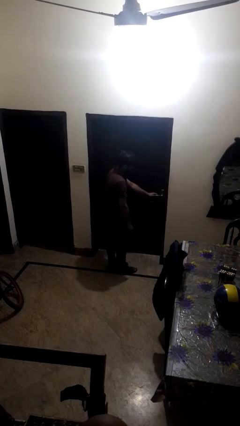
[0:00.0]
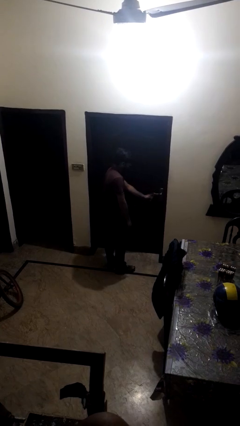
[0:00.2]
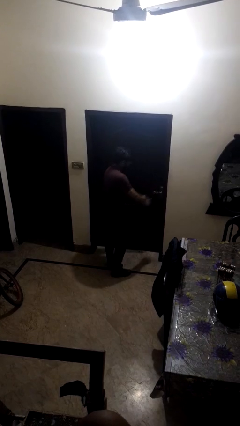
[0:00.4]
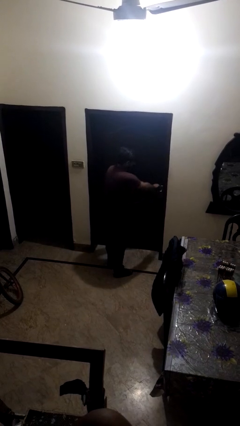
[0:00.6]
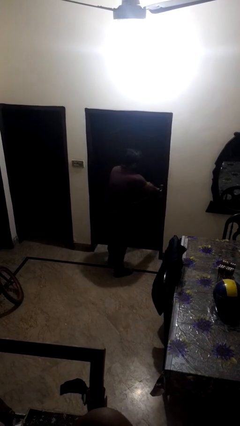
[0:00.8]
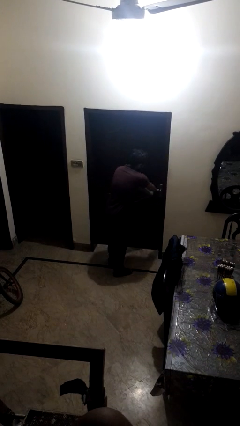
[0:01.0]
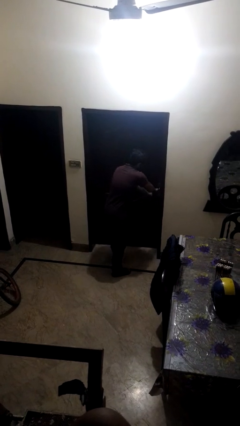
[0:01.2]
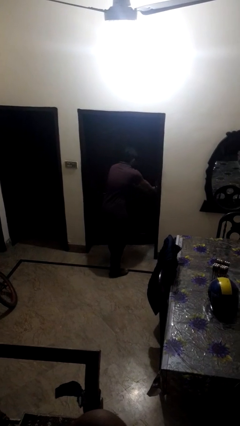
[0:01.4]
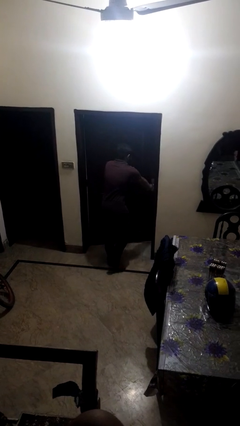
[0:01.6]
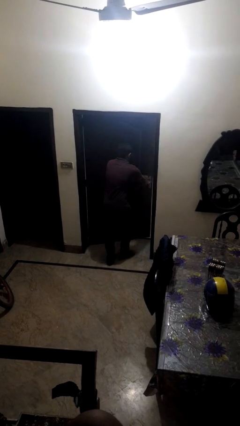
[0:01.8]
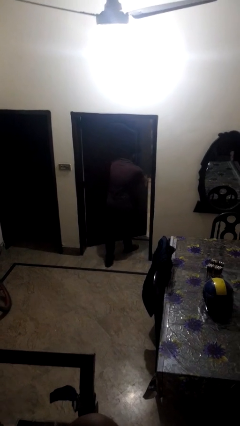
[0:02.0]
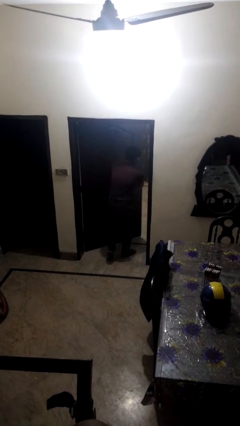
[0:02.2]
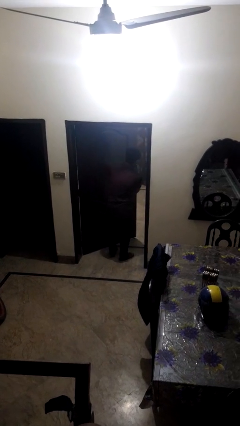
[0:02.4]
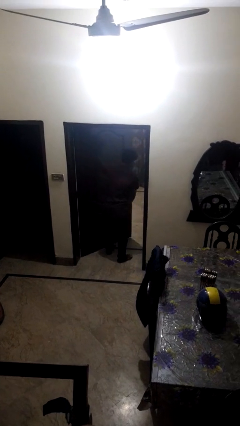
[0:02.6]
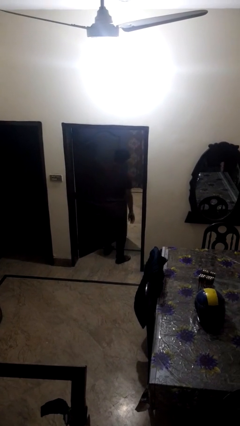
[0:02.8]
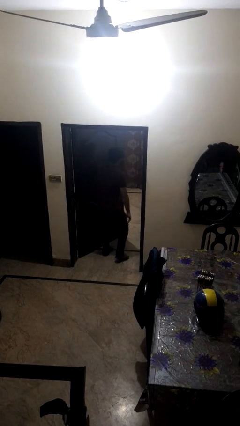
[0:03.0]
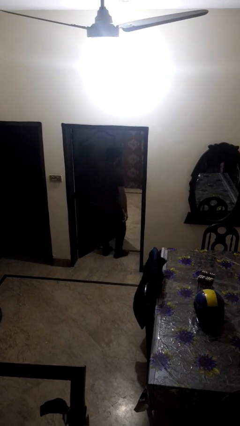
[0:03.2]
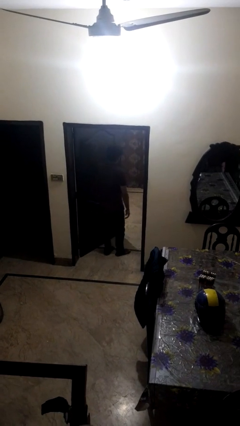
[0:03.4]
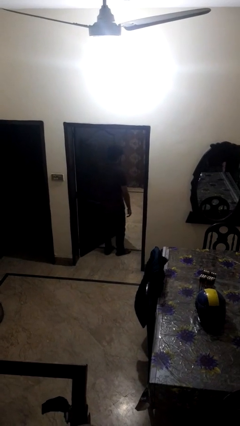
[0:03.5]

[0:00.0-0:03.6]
person opens facility door

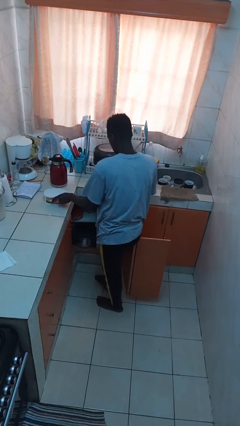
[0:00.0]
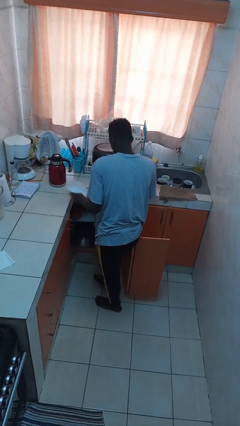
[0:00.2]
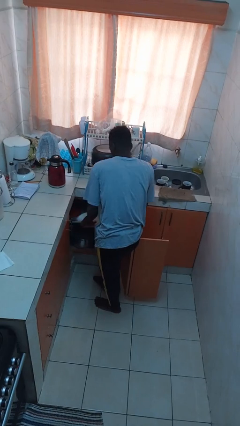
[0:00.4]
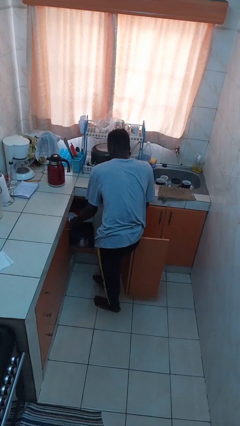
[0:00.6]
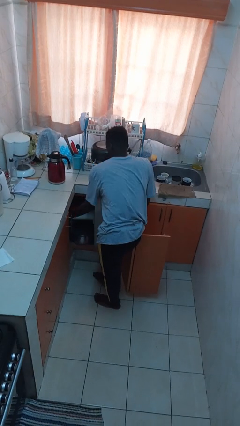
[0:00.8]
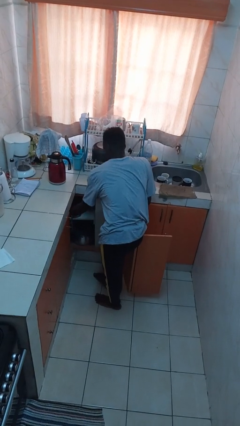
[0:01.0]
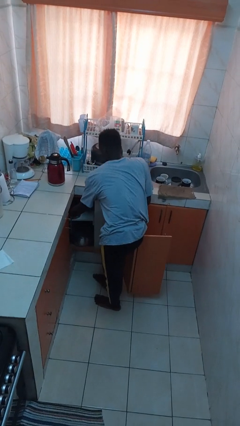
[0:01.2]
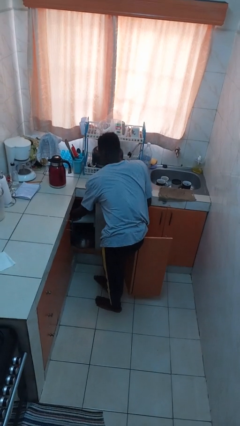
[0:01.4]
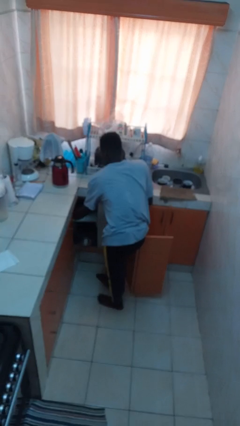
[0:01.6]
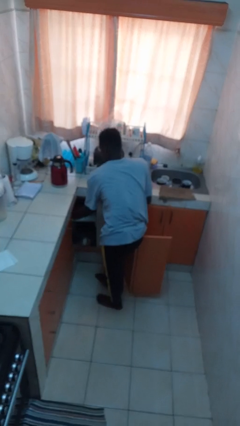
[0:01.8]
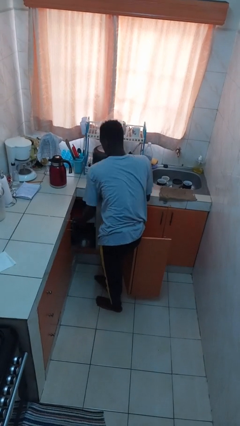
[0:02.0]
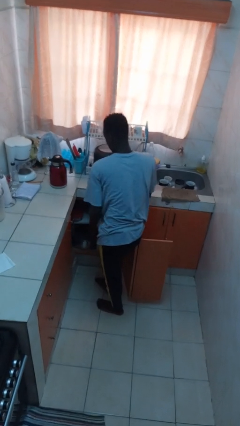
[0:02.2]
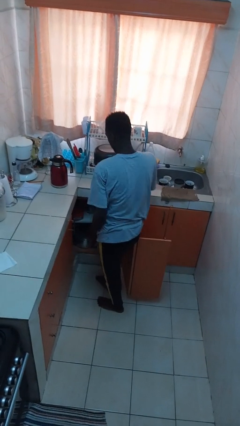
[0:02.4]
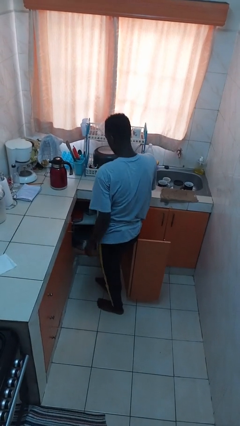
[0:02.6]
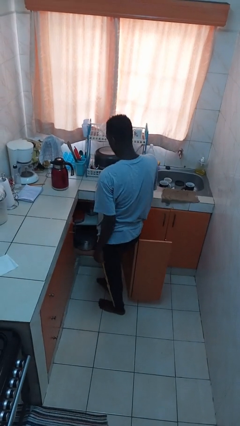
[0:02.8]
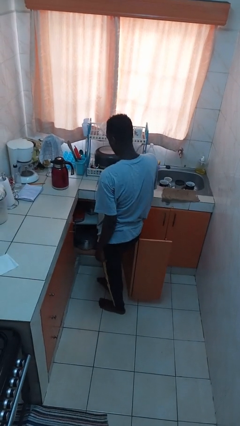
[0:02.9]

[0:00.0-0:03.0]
person puts object in cabinet

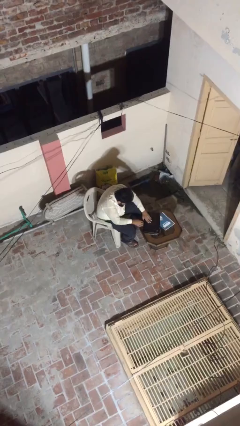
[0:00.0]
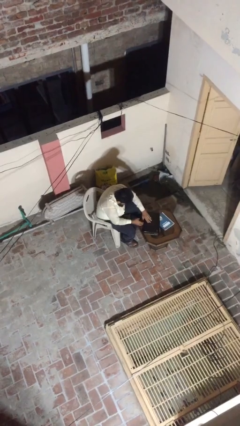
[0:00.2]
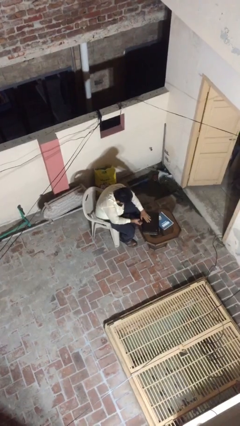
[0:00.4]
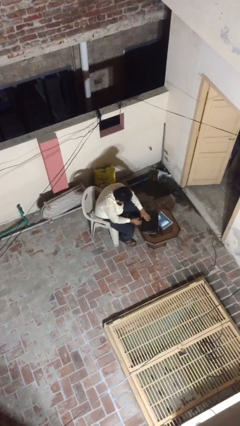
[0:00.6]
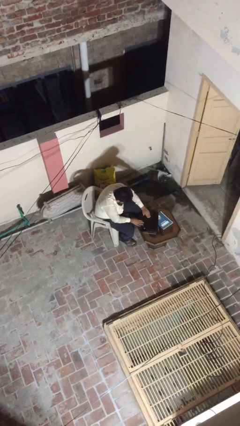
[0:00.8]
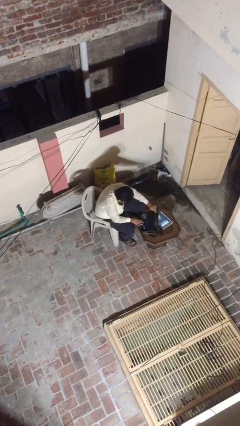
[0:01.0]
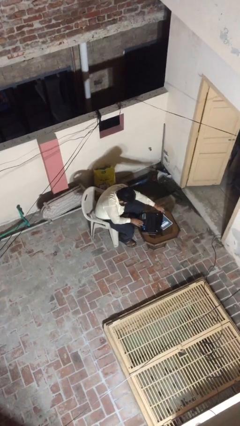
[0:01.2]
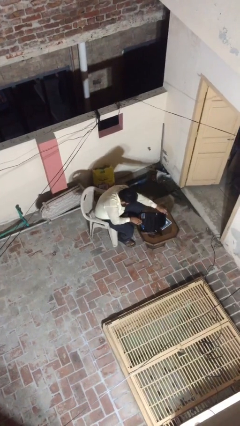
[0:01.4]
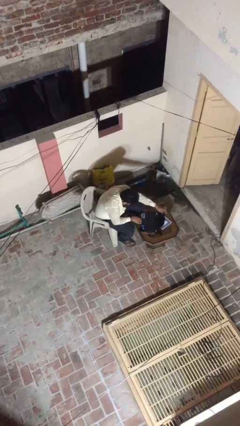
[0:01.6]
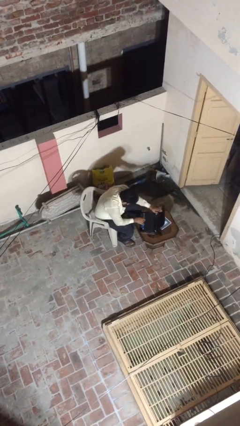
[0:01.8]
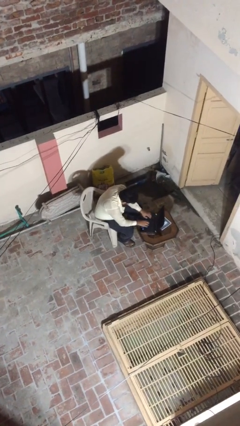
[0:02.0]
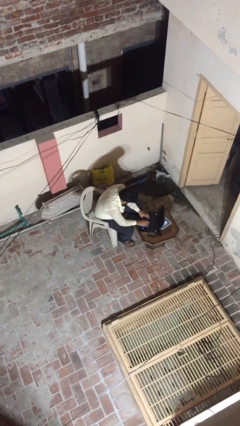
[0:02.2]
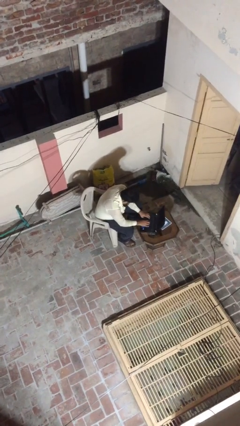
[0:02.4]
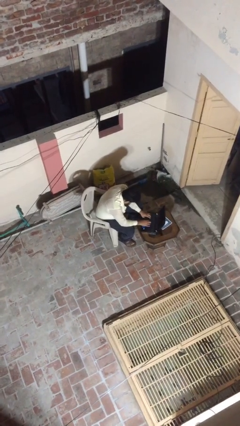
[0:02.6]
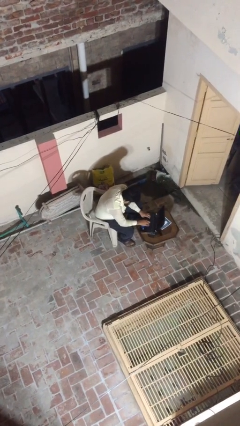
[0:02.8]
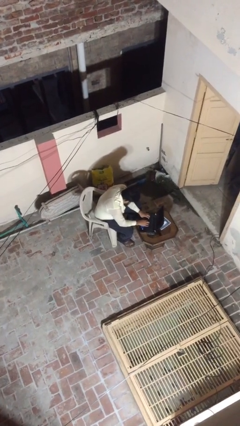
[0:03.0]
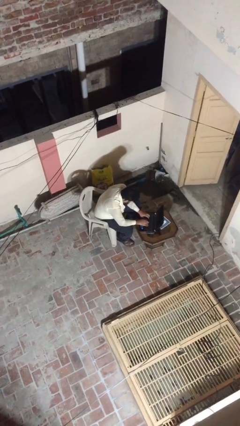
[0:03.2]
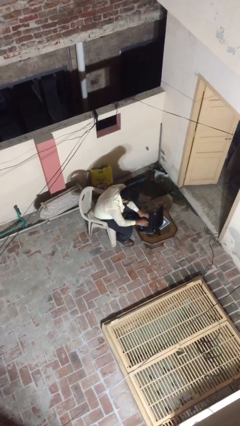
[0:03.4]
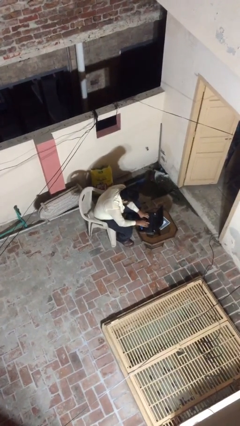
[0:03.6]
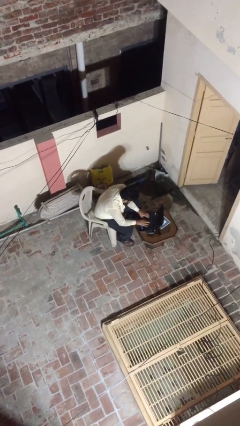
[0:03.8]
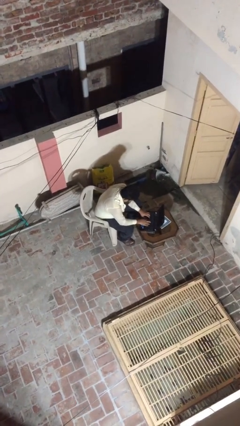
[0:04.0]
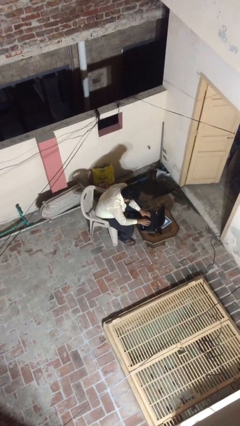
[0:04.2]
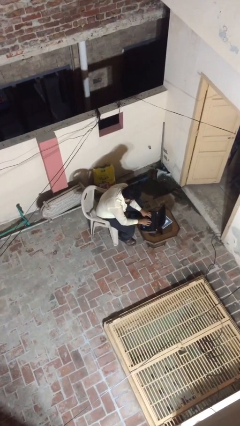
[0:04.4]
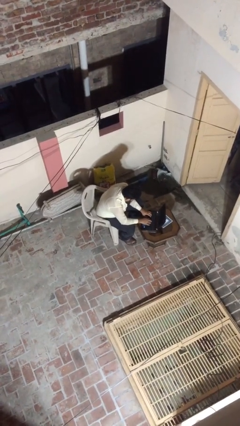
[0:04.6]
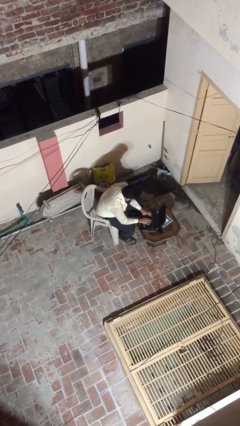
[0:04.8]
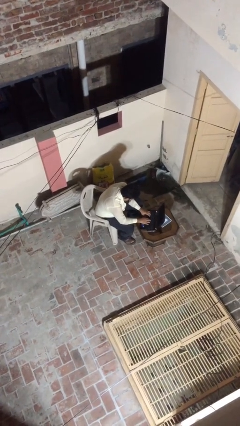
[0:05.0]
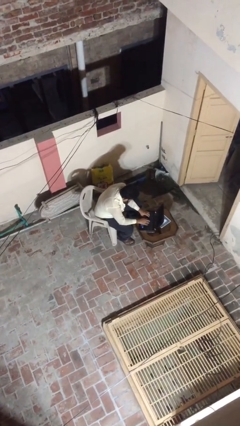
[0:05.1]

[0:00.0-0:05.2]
person interacts with laptop

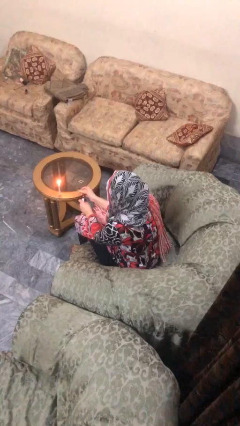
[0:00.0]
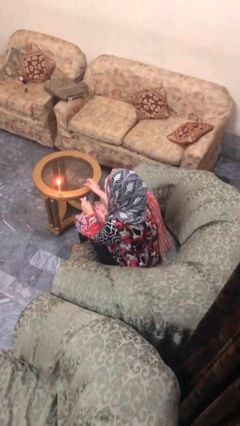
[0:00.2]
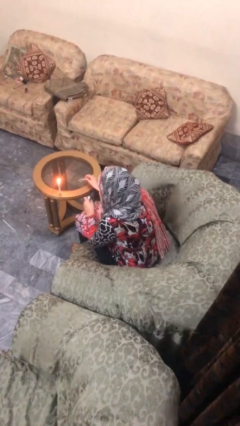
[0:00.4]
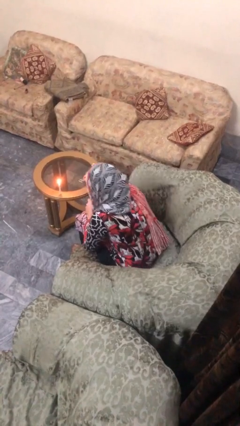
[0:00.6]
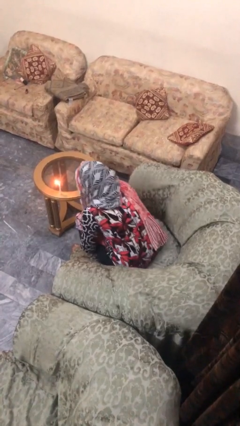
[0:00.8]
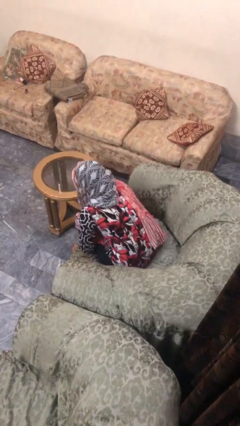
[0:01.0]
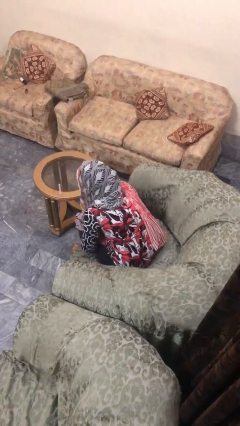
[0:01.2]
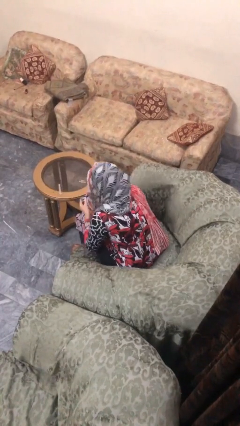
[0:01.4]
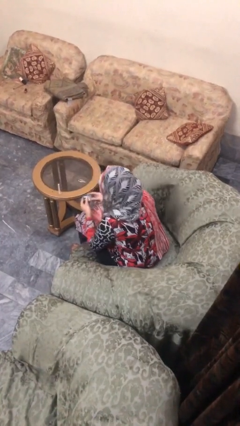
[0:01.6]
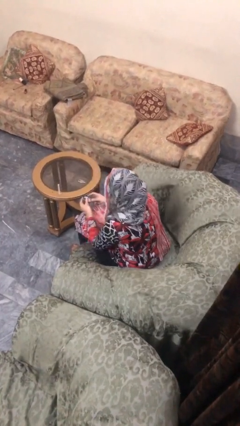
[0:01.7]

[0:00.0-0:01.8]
person extinguishes candle

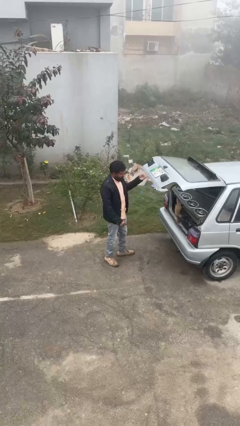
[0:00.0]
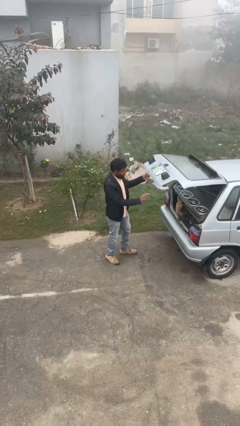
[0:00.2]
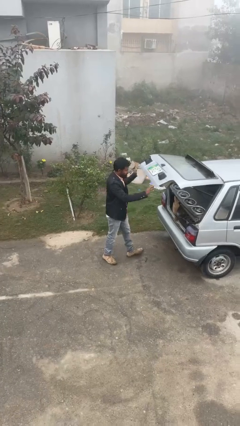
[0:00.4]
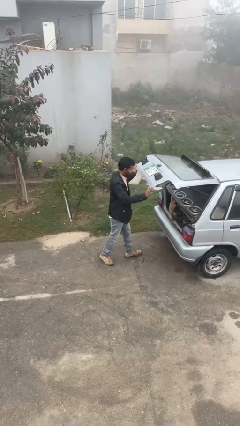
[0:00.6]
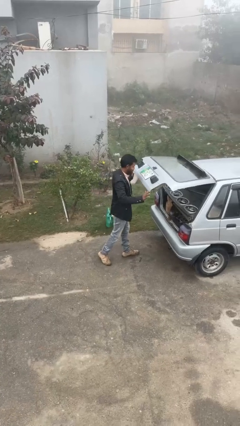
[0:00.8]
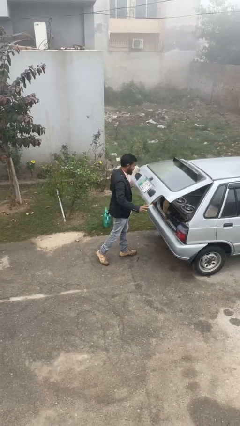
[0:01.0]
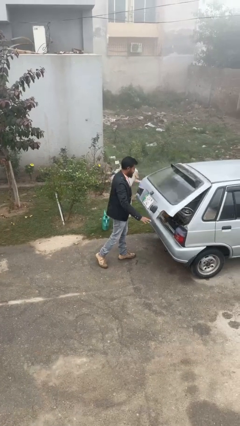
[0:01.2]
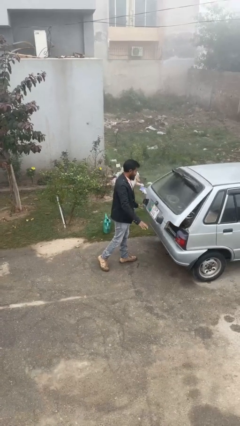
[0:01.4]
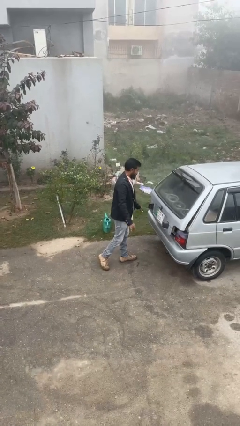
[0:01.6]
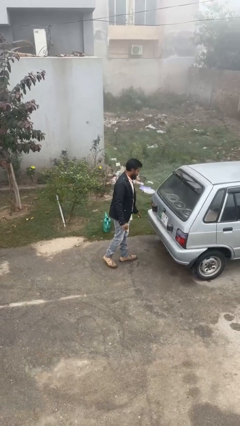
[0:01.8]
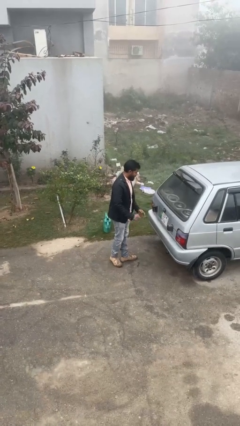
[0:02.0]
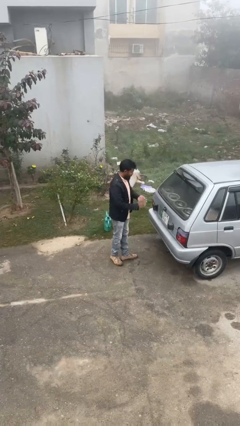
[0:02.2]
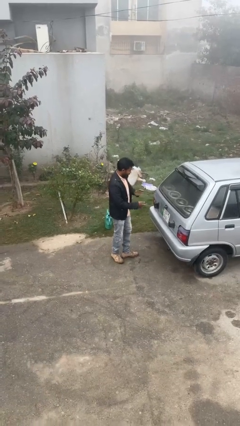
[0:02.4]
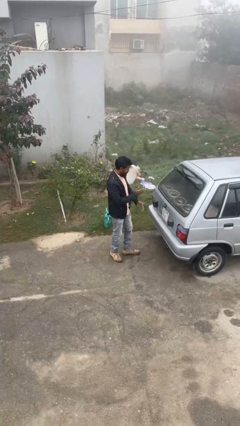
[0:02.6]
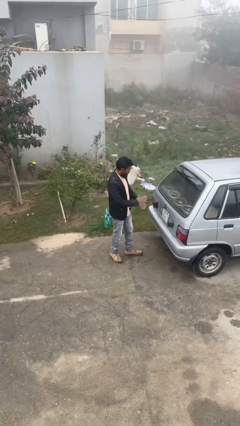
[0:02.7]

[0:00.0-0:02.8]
person closes car trunk

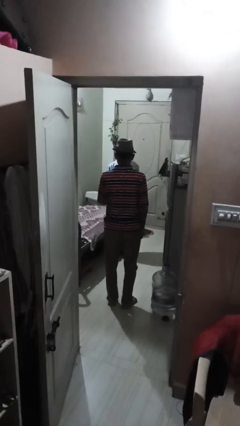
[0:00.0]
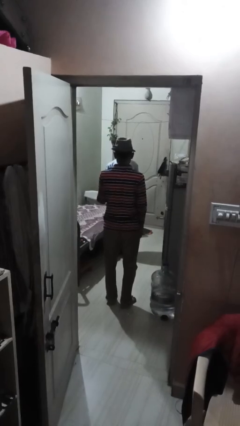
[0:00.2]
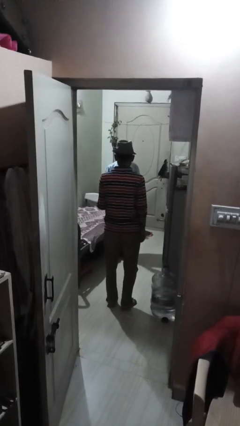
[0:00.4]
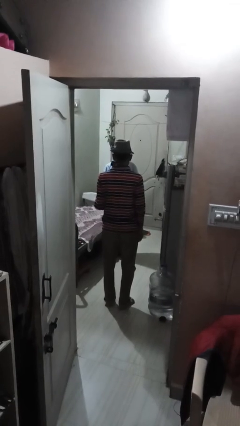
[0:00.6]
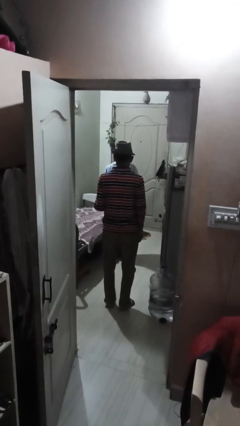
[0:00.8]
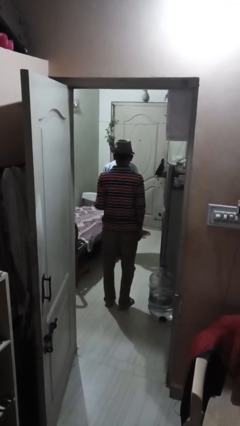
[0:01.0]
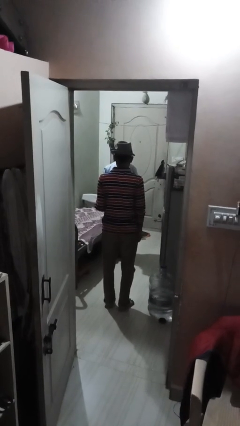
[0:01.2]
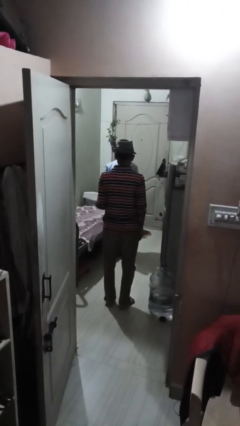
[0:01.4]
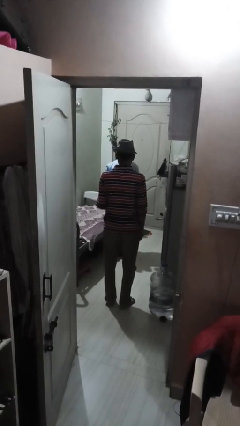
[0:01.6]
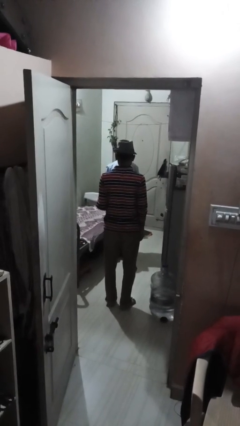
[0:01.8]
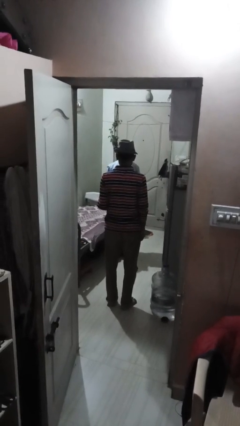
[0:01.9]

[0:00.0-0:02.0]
person catches object from person
